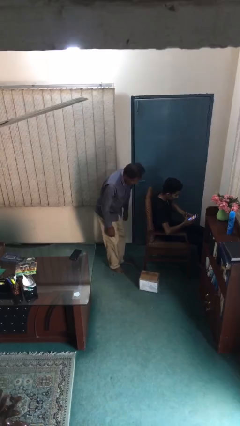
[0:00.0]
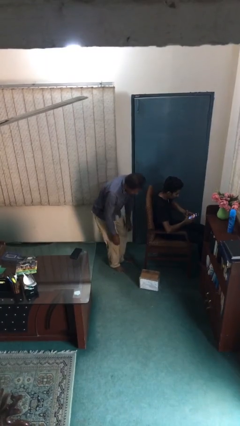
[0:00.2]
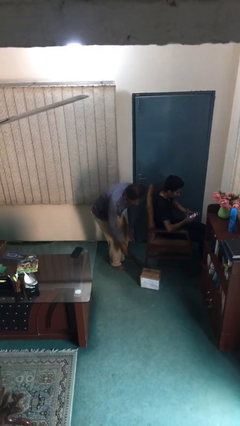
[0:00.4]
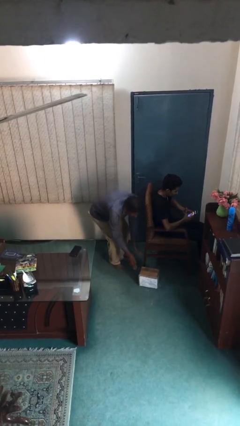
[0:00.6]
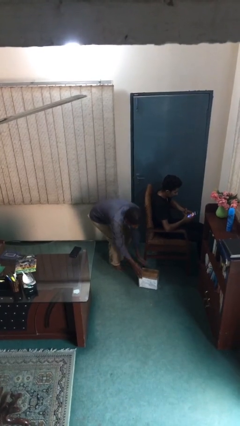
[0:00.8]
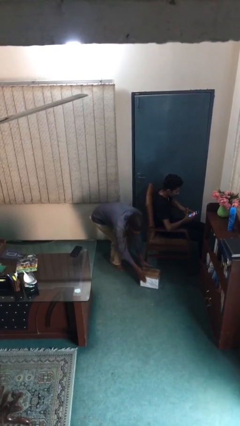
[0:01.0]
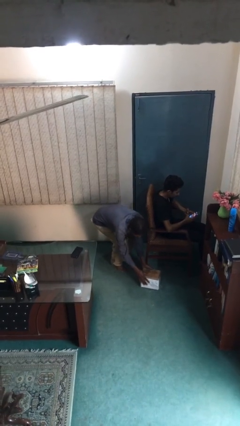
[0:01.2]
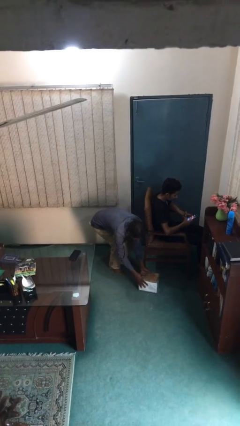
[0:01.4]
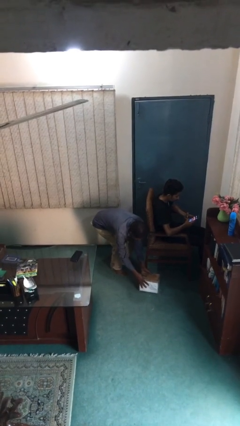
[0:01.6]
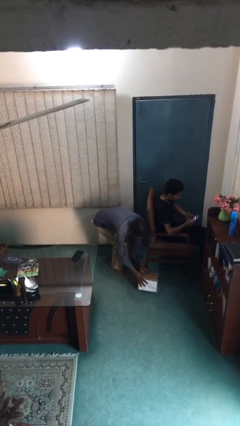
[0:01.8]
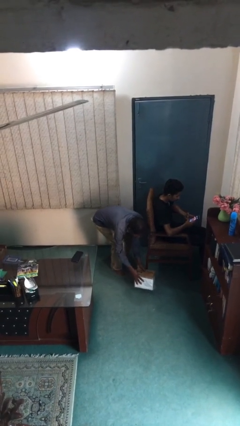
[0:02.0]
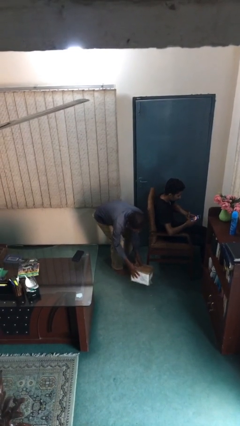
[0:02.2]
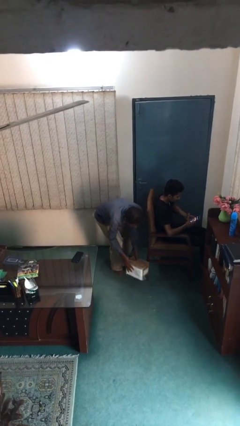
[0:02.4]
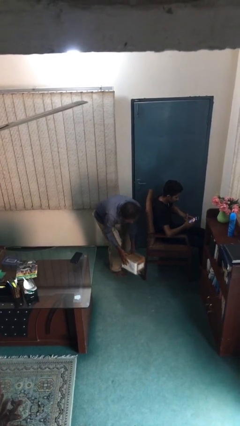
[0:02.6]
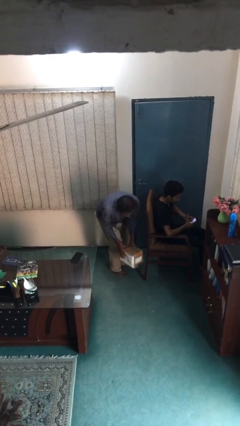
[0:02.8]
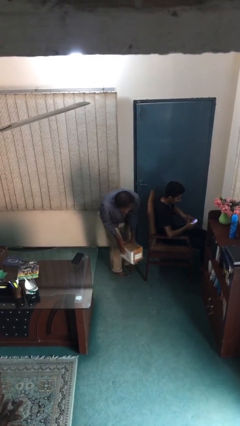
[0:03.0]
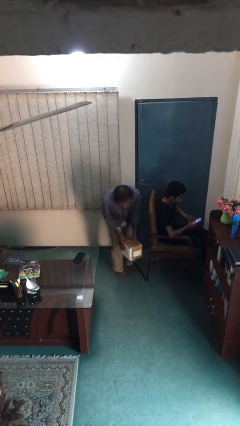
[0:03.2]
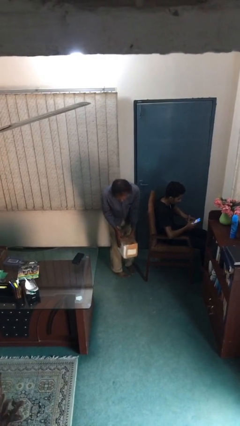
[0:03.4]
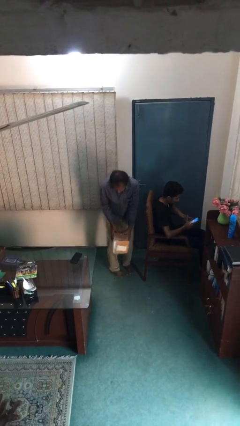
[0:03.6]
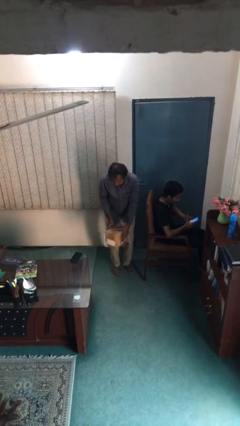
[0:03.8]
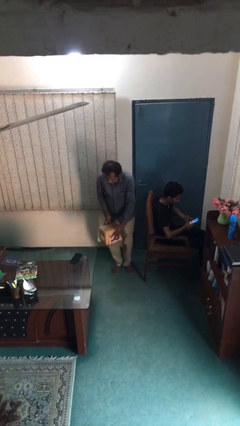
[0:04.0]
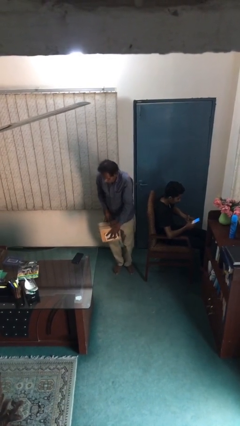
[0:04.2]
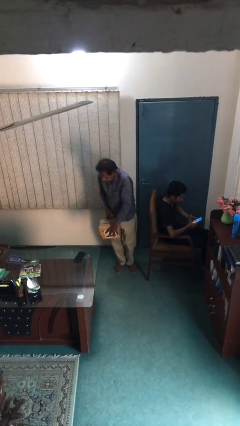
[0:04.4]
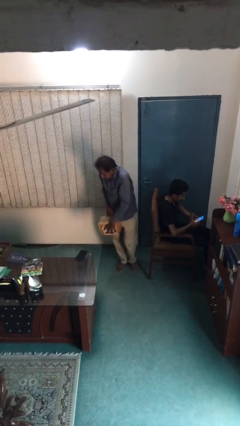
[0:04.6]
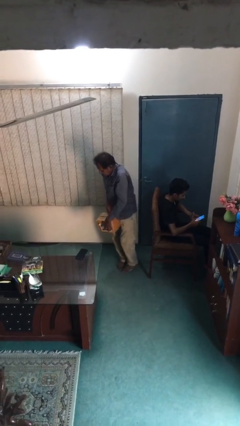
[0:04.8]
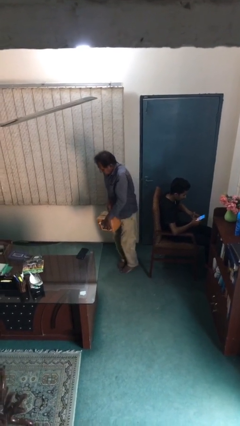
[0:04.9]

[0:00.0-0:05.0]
person steals object from person

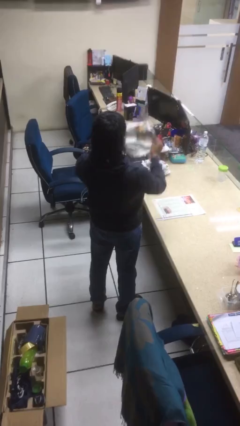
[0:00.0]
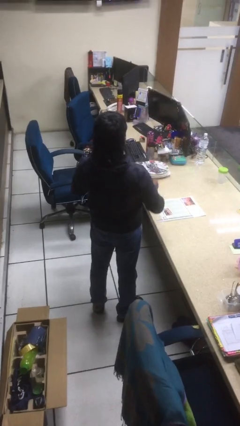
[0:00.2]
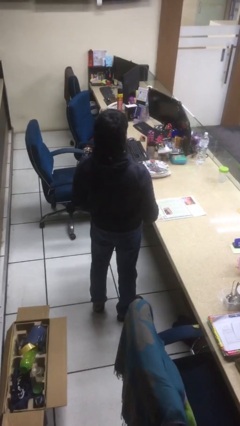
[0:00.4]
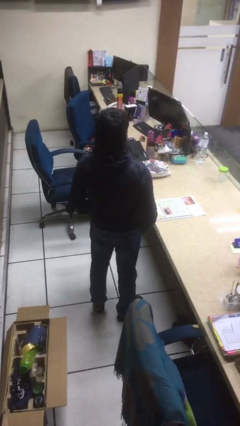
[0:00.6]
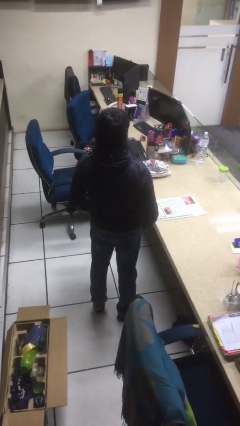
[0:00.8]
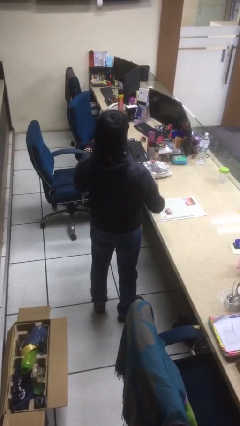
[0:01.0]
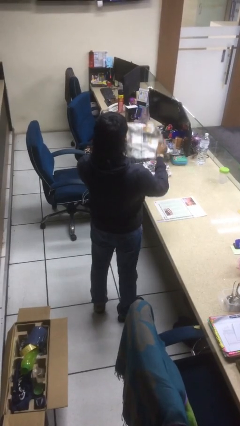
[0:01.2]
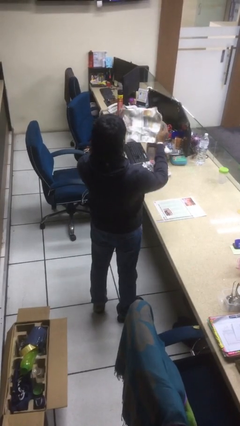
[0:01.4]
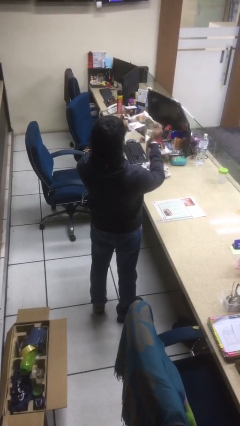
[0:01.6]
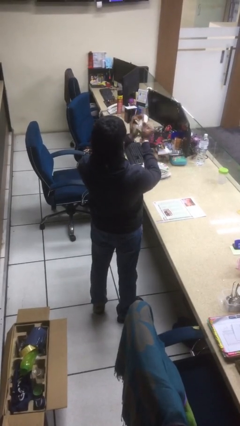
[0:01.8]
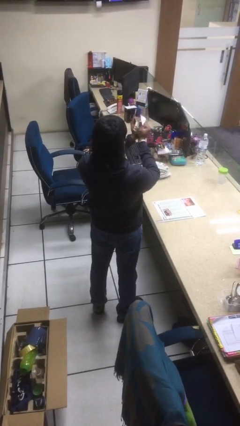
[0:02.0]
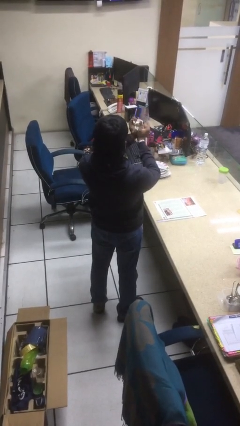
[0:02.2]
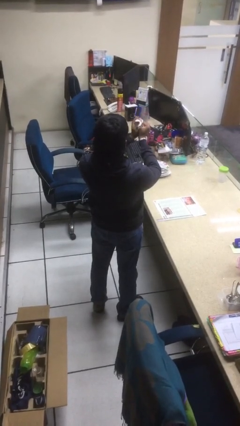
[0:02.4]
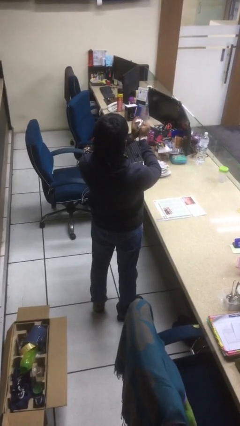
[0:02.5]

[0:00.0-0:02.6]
person crumples paper

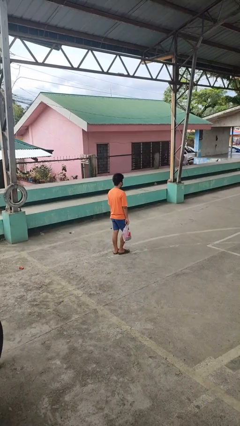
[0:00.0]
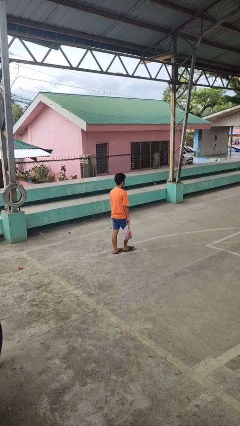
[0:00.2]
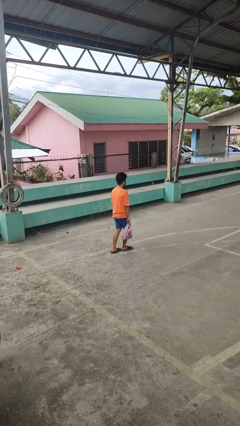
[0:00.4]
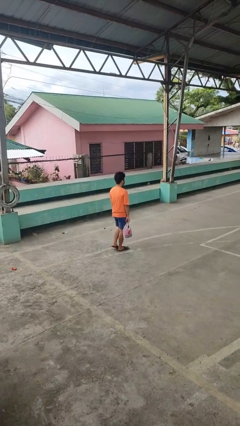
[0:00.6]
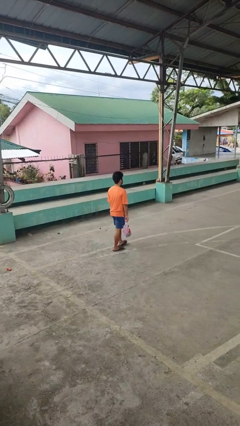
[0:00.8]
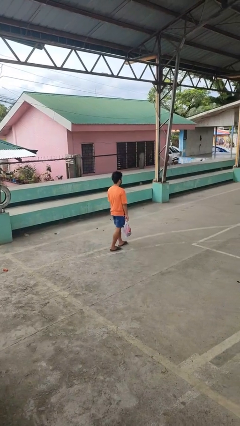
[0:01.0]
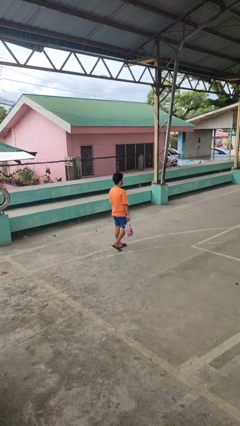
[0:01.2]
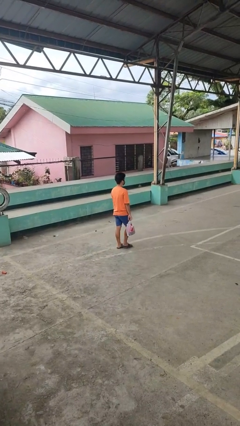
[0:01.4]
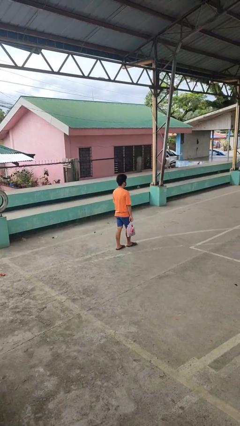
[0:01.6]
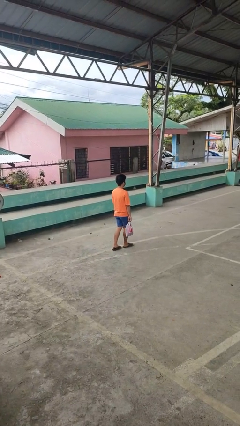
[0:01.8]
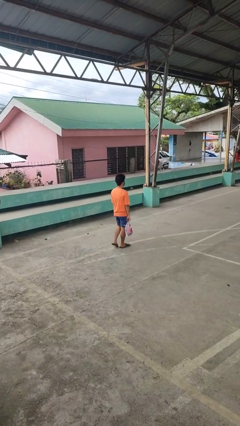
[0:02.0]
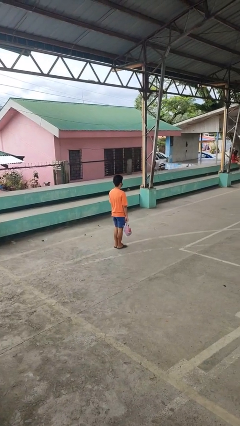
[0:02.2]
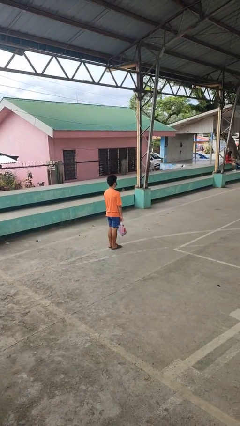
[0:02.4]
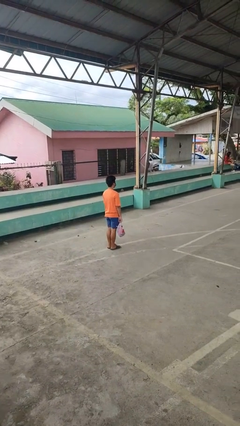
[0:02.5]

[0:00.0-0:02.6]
person carries groceries

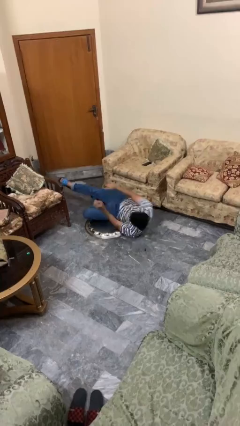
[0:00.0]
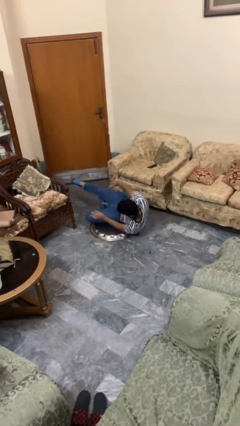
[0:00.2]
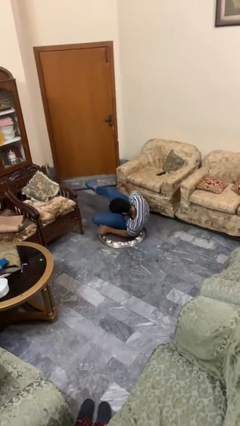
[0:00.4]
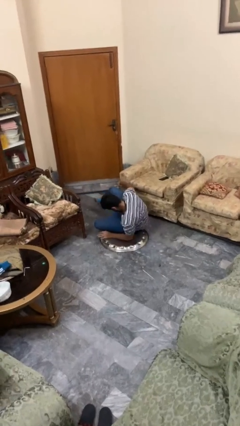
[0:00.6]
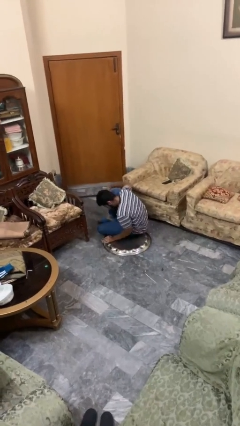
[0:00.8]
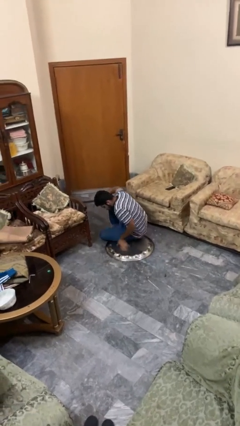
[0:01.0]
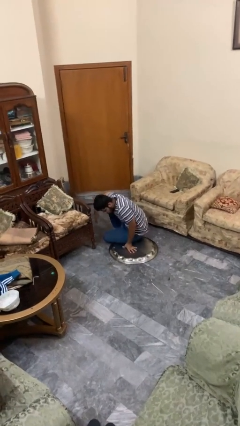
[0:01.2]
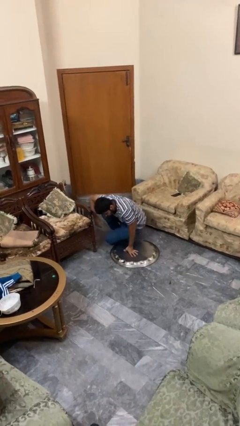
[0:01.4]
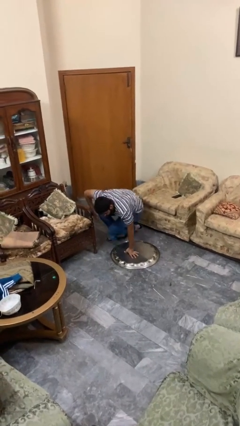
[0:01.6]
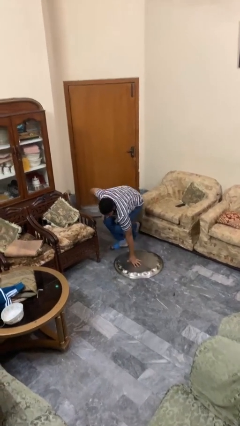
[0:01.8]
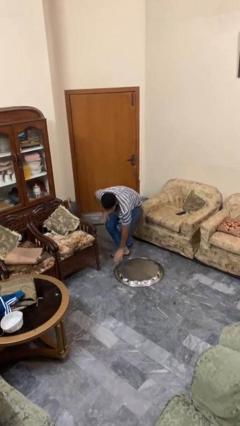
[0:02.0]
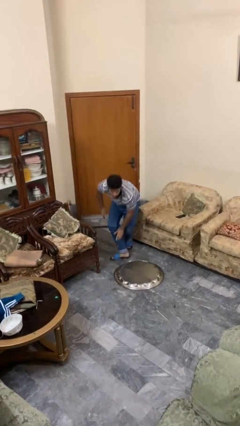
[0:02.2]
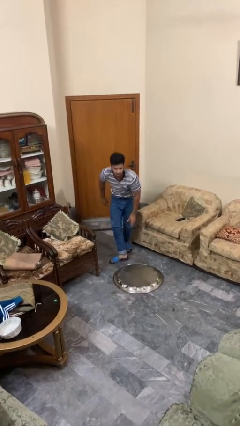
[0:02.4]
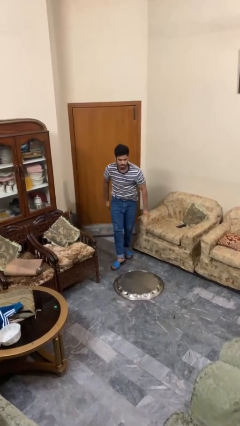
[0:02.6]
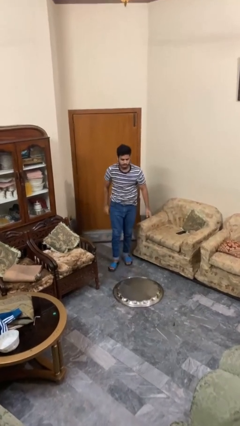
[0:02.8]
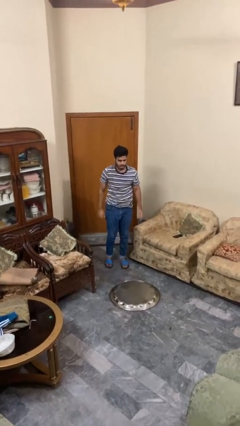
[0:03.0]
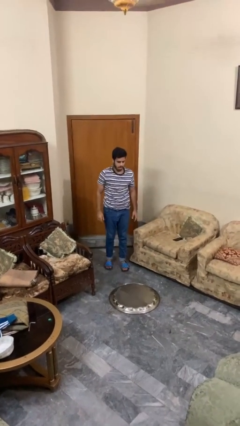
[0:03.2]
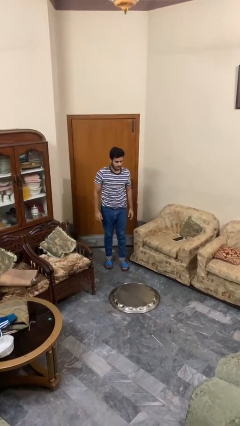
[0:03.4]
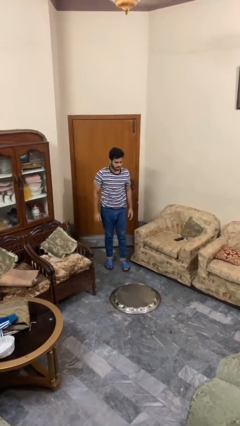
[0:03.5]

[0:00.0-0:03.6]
person stands up from floor

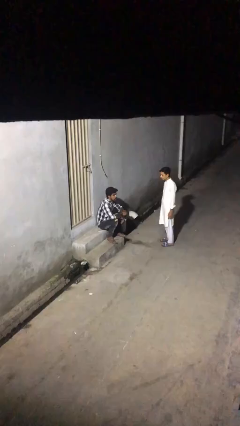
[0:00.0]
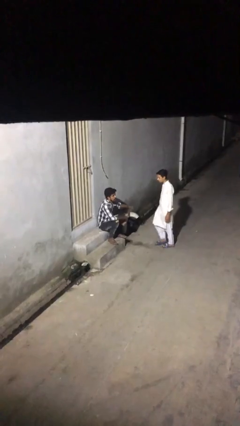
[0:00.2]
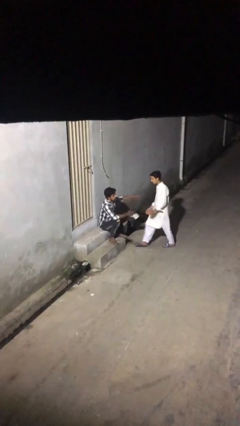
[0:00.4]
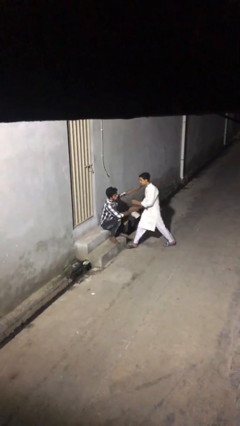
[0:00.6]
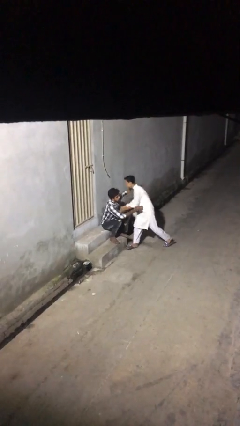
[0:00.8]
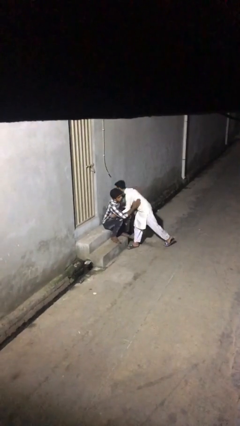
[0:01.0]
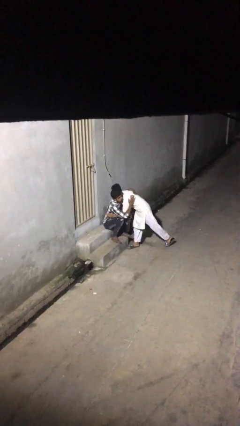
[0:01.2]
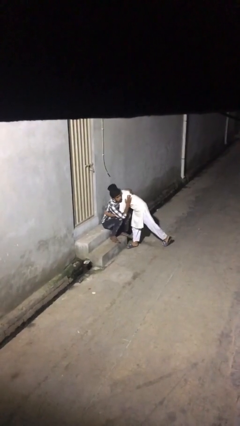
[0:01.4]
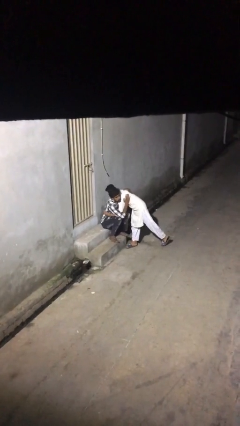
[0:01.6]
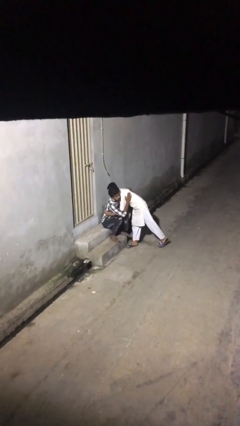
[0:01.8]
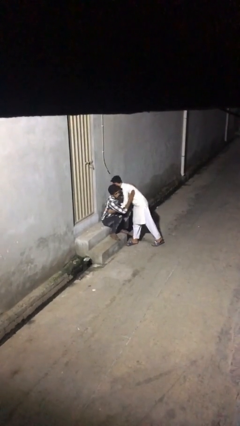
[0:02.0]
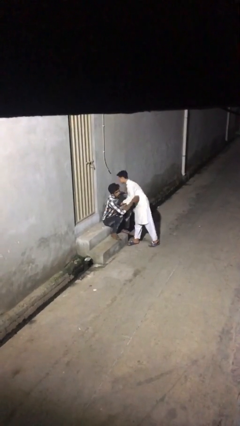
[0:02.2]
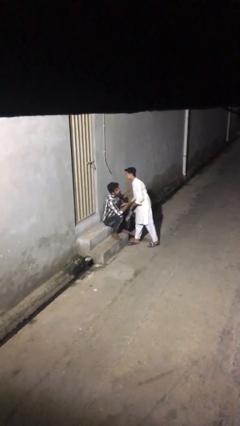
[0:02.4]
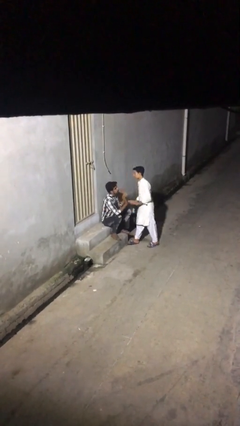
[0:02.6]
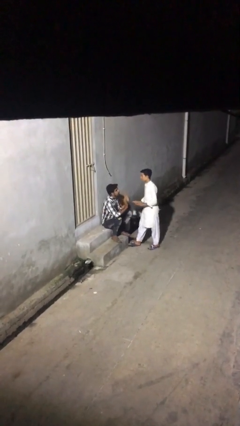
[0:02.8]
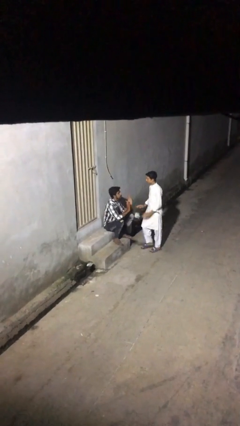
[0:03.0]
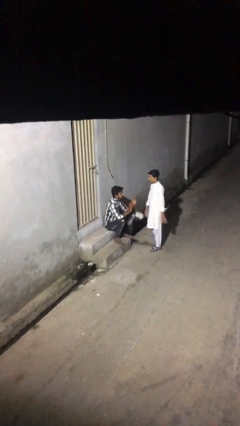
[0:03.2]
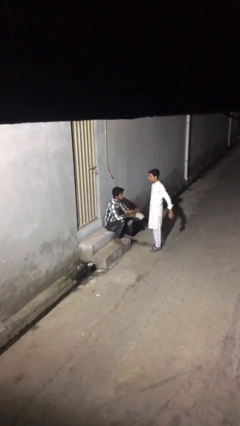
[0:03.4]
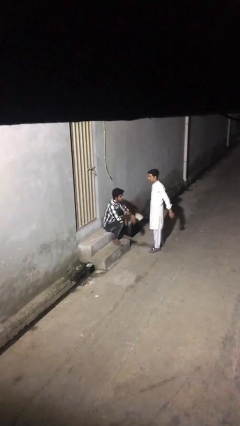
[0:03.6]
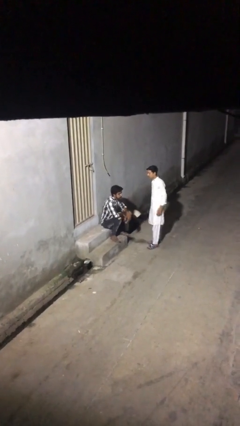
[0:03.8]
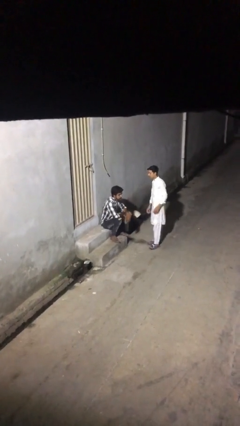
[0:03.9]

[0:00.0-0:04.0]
person embraces person
